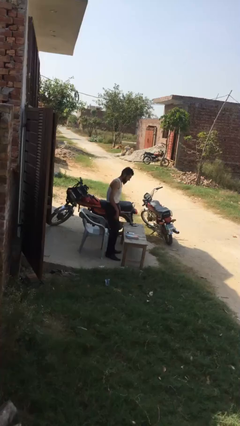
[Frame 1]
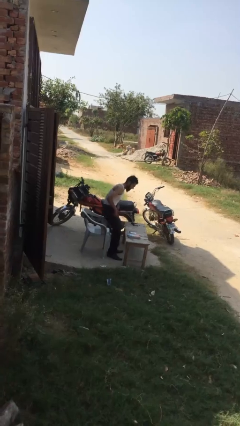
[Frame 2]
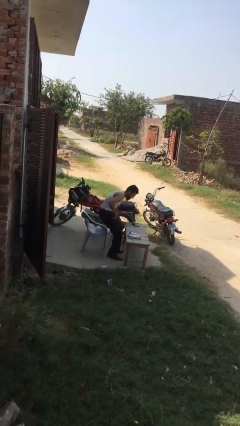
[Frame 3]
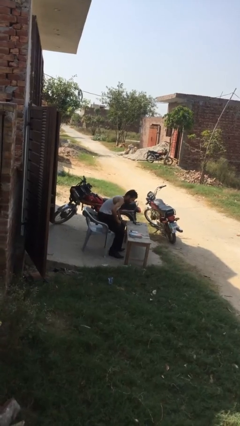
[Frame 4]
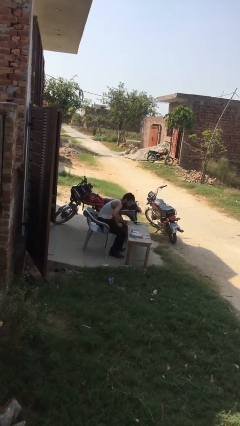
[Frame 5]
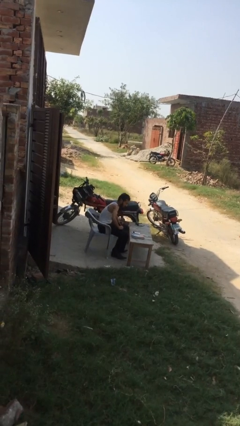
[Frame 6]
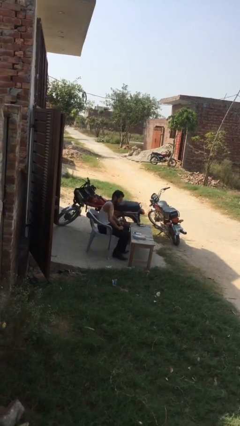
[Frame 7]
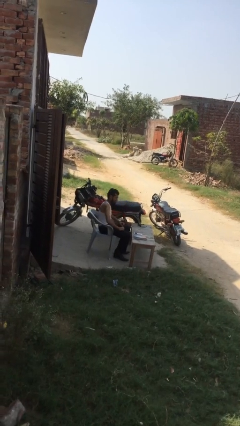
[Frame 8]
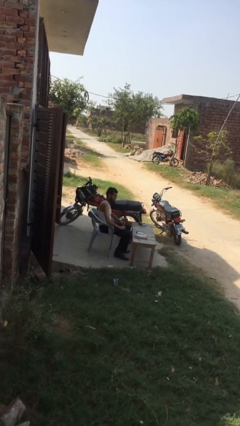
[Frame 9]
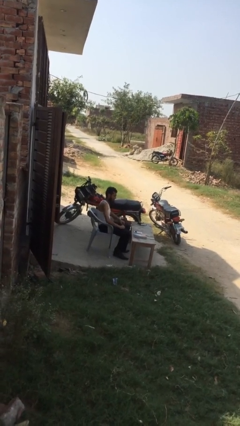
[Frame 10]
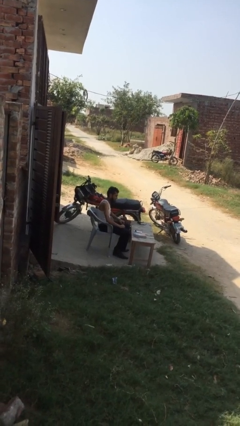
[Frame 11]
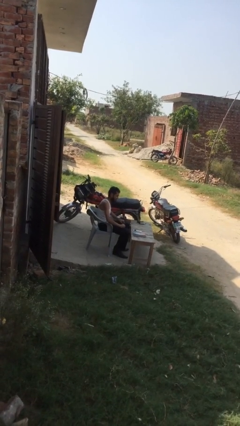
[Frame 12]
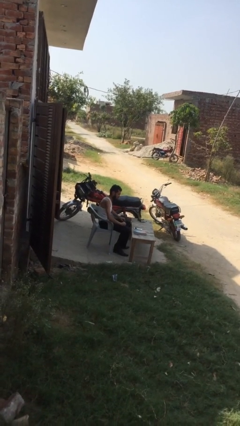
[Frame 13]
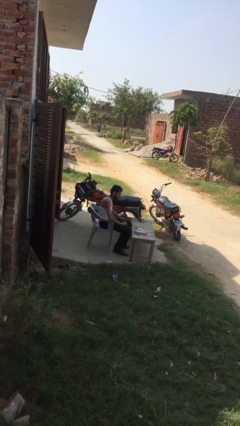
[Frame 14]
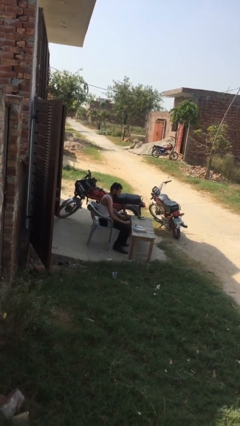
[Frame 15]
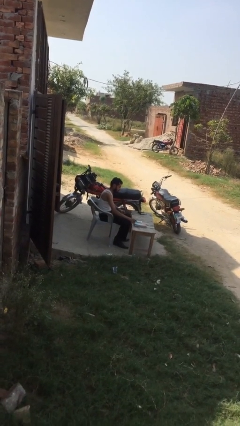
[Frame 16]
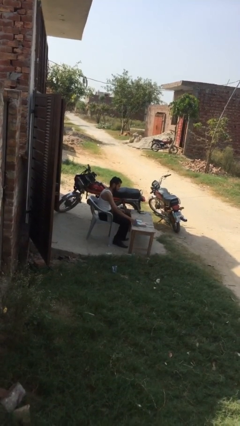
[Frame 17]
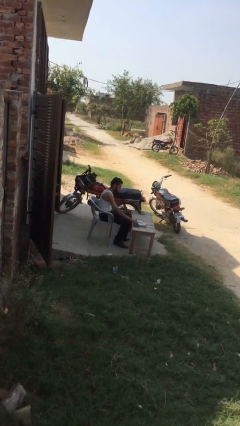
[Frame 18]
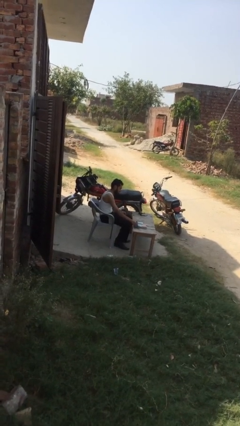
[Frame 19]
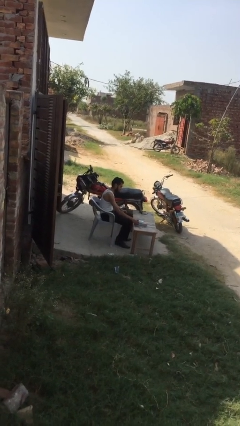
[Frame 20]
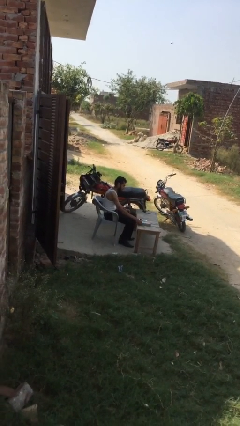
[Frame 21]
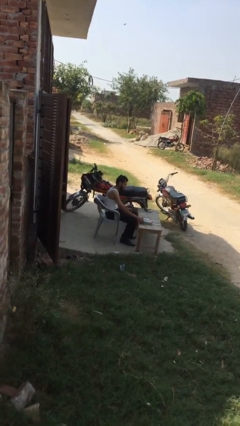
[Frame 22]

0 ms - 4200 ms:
person sits down

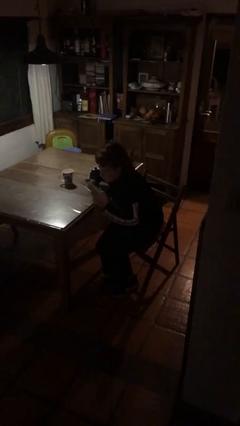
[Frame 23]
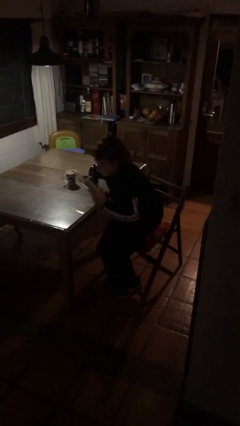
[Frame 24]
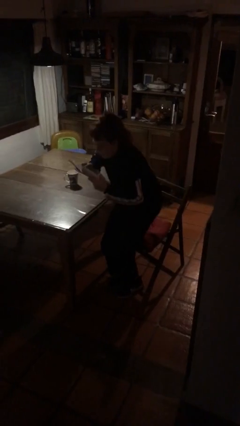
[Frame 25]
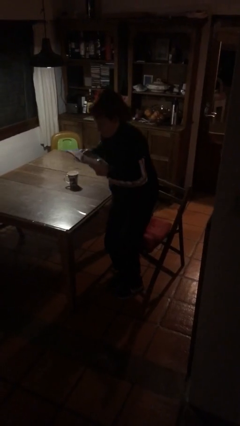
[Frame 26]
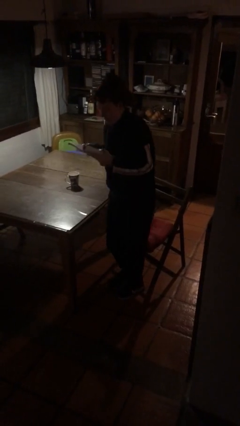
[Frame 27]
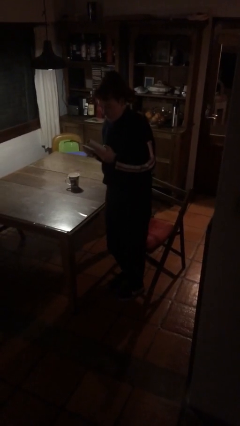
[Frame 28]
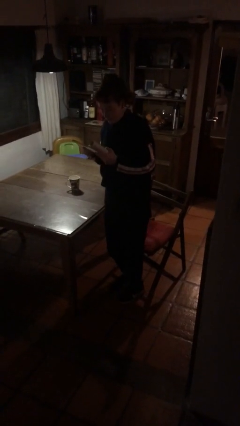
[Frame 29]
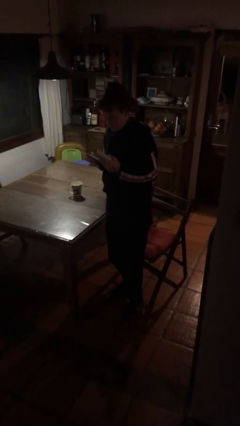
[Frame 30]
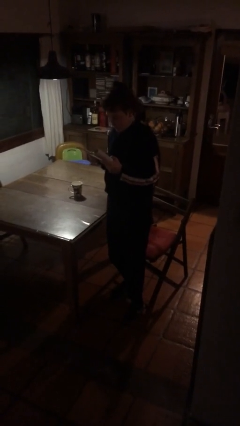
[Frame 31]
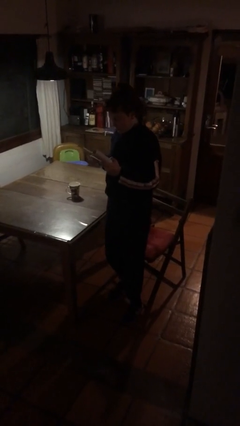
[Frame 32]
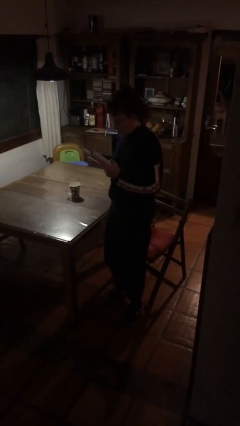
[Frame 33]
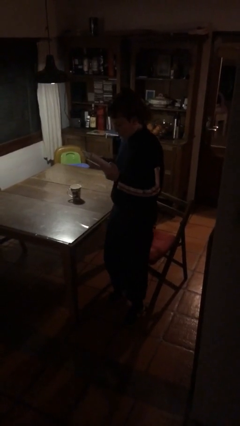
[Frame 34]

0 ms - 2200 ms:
person stands up

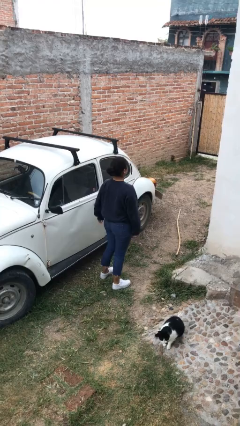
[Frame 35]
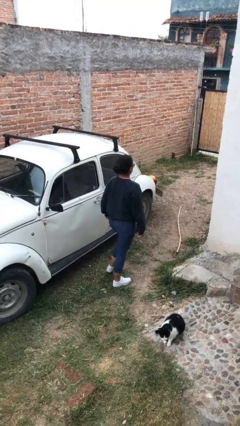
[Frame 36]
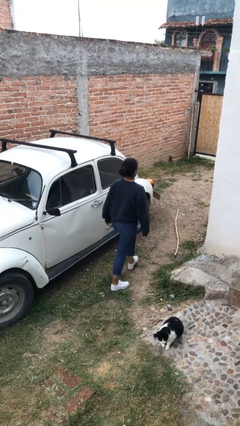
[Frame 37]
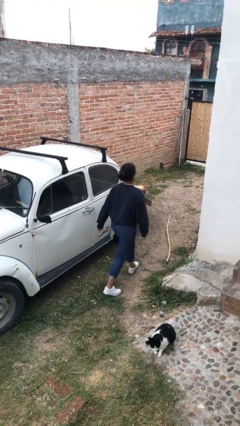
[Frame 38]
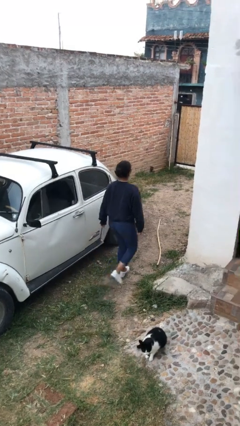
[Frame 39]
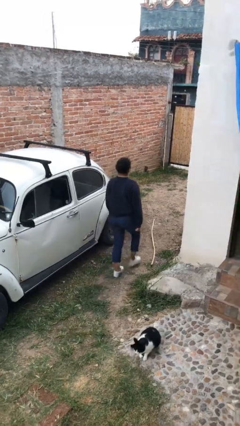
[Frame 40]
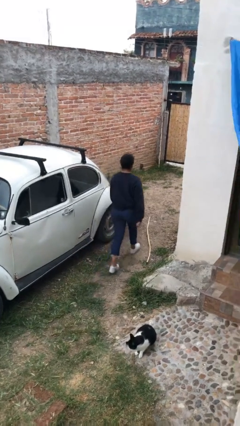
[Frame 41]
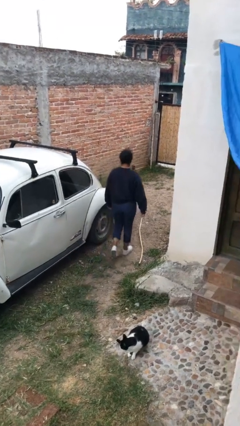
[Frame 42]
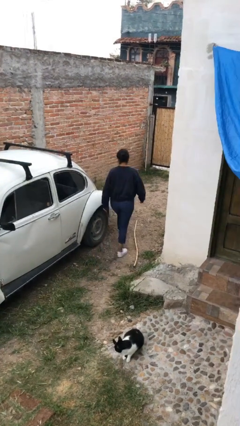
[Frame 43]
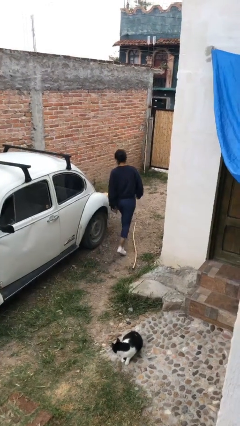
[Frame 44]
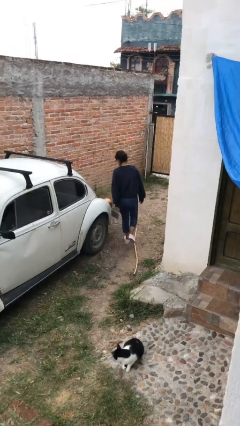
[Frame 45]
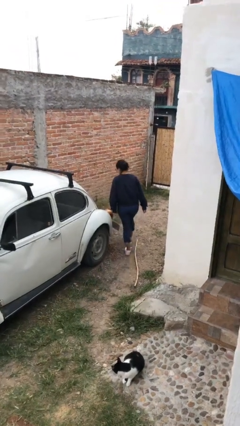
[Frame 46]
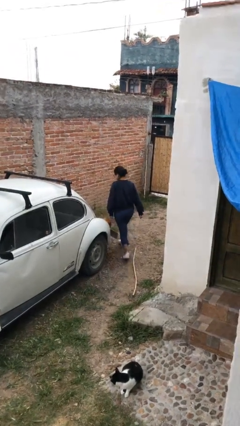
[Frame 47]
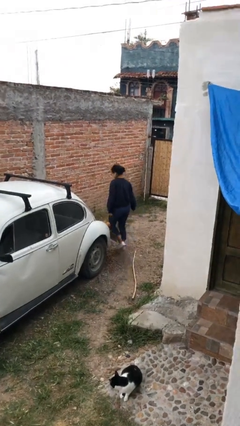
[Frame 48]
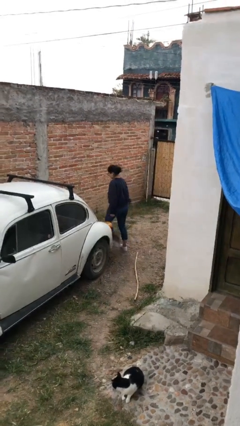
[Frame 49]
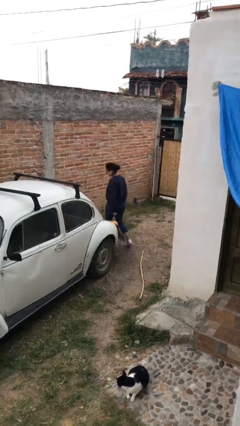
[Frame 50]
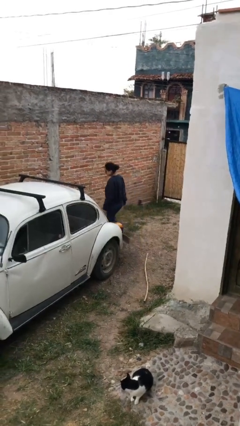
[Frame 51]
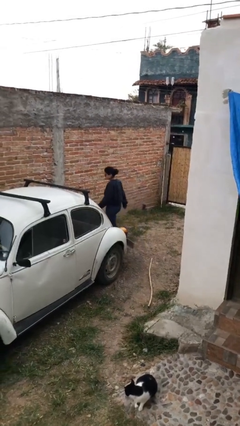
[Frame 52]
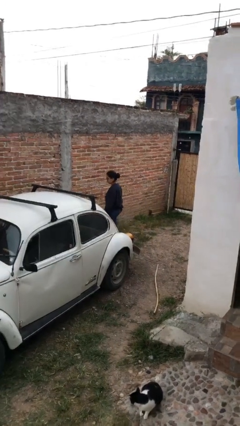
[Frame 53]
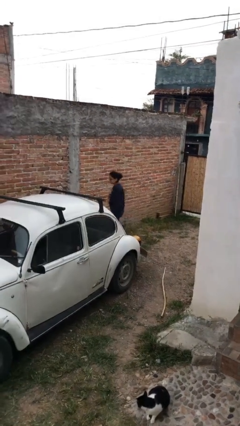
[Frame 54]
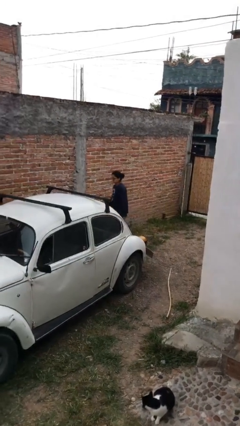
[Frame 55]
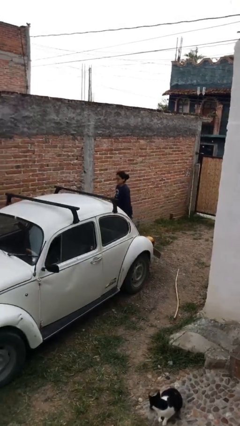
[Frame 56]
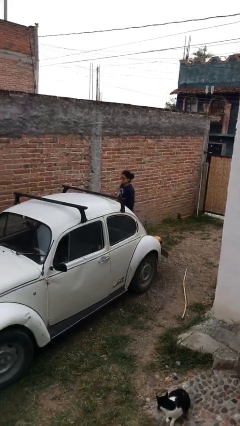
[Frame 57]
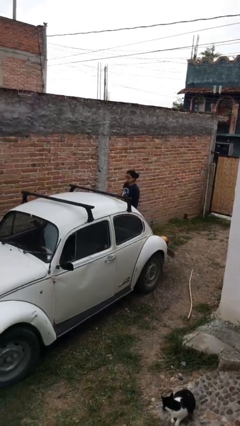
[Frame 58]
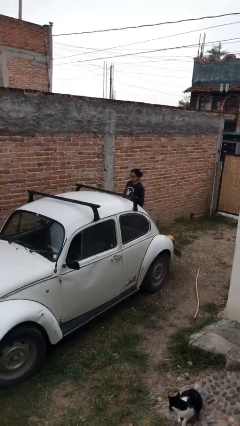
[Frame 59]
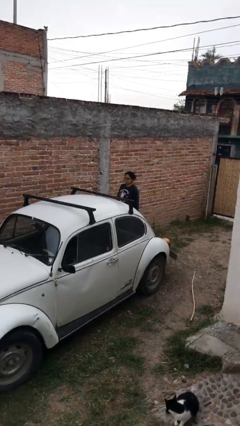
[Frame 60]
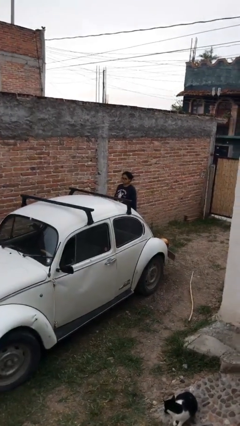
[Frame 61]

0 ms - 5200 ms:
person walks around car

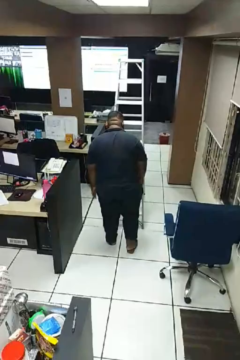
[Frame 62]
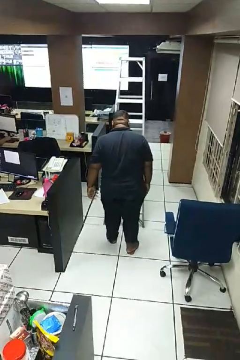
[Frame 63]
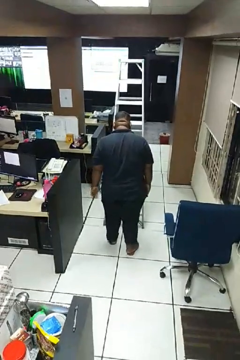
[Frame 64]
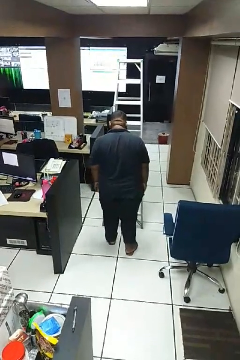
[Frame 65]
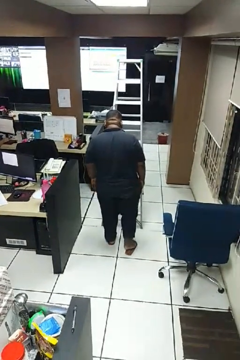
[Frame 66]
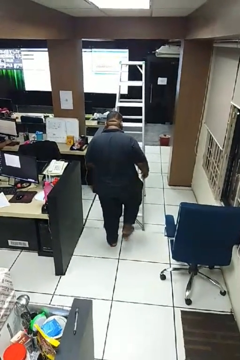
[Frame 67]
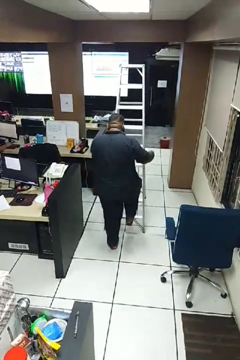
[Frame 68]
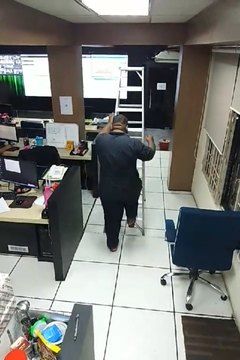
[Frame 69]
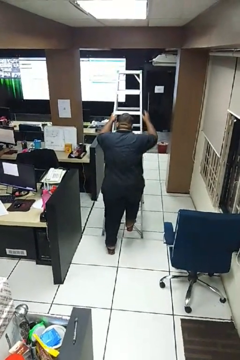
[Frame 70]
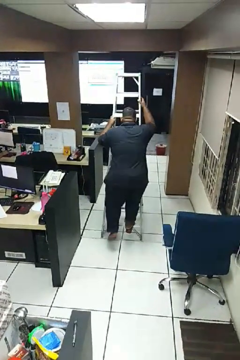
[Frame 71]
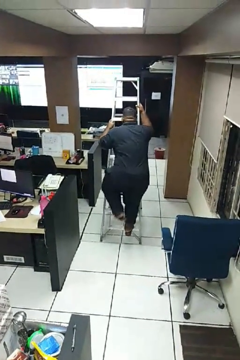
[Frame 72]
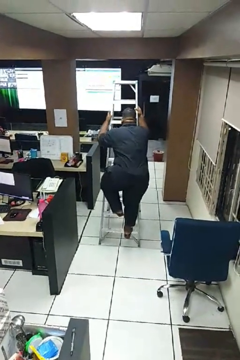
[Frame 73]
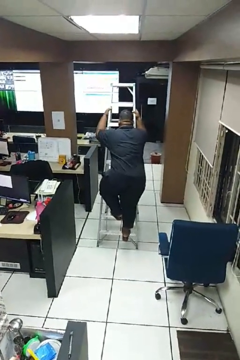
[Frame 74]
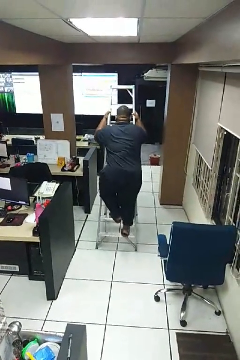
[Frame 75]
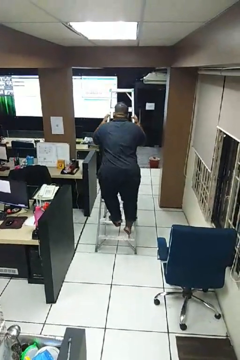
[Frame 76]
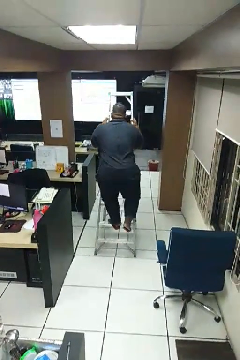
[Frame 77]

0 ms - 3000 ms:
person climbs up ladder

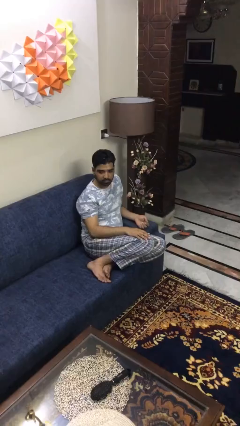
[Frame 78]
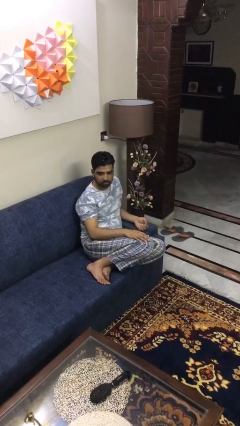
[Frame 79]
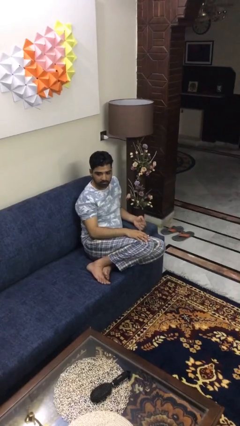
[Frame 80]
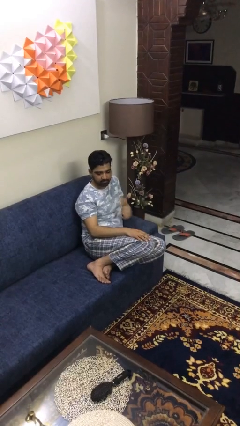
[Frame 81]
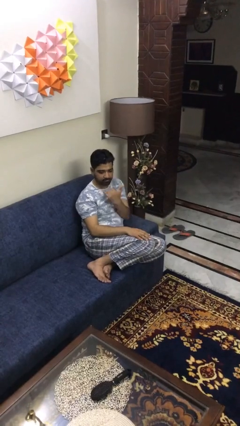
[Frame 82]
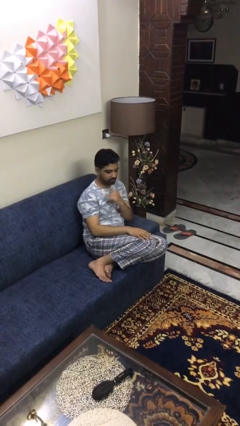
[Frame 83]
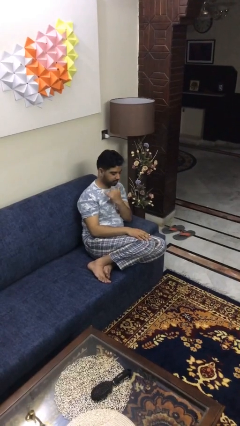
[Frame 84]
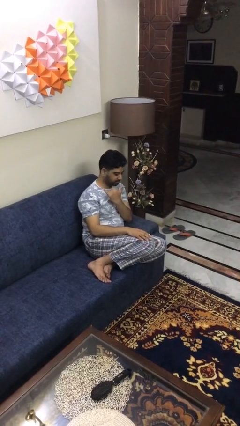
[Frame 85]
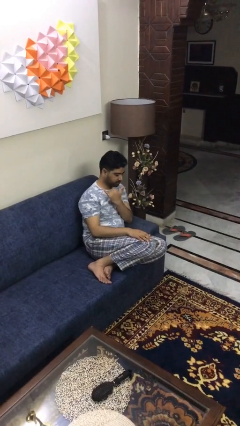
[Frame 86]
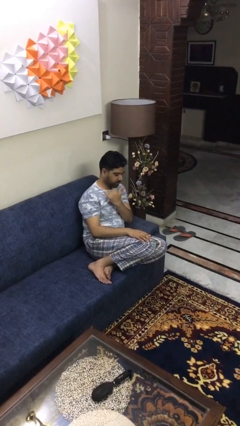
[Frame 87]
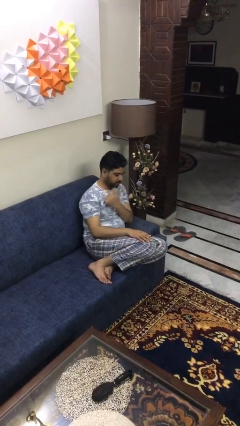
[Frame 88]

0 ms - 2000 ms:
person gestures hang loose

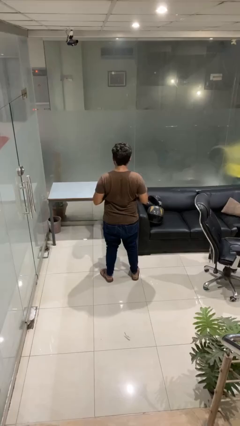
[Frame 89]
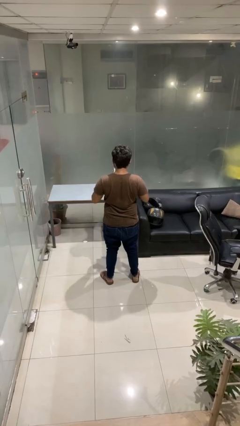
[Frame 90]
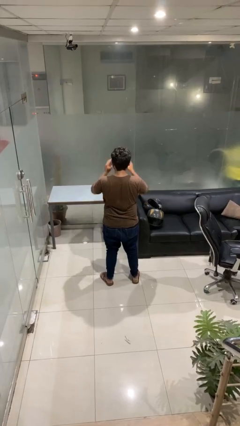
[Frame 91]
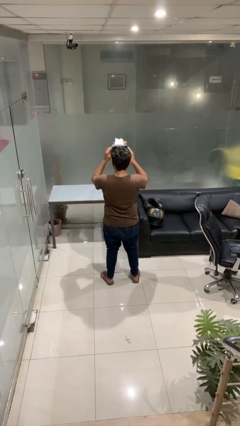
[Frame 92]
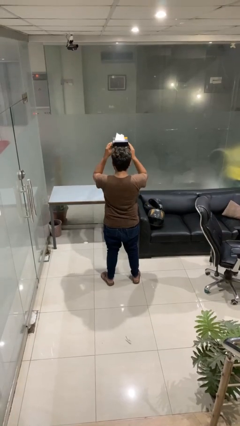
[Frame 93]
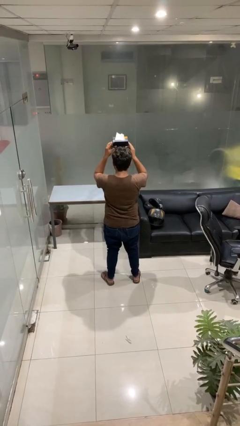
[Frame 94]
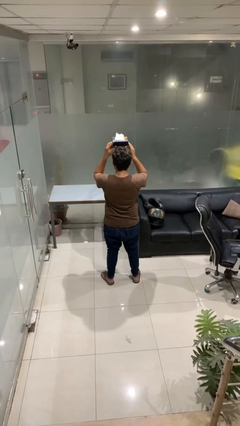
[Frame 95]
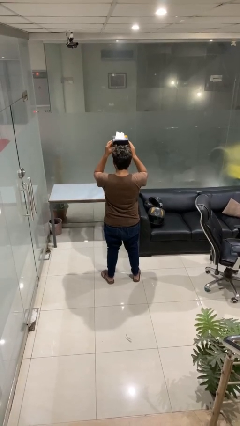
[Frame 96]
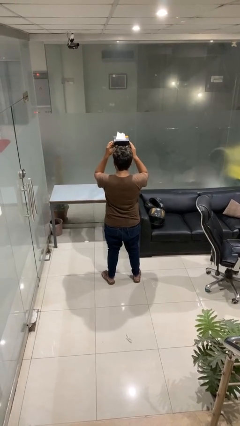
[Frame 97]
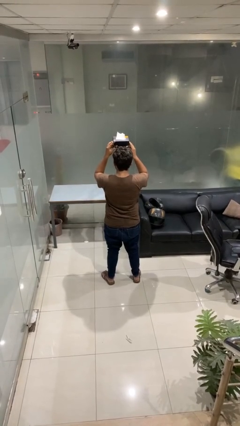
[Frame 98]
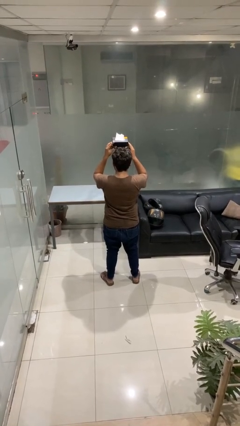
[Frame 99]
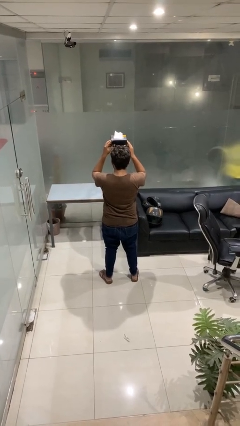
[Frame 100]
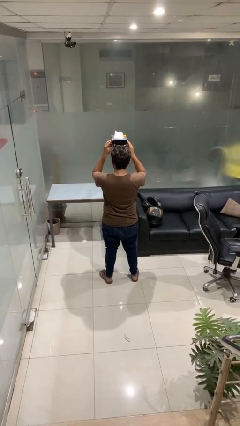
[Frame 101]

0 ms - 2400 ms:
person holds object above head
